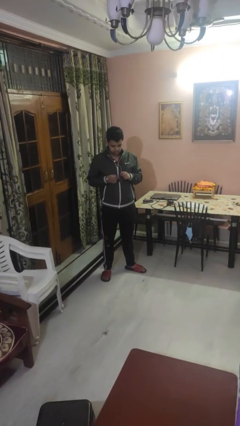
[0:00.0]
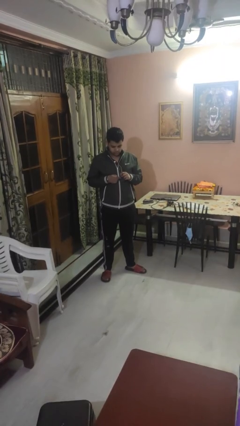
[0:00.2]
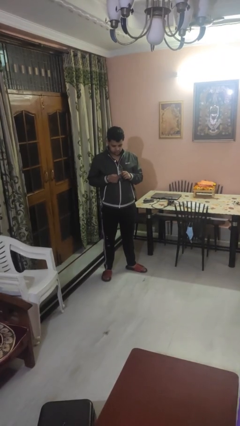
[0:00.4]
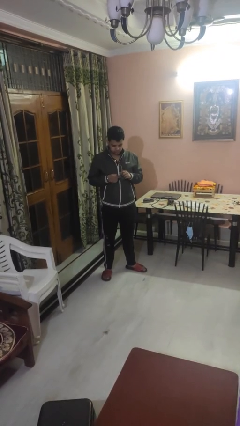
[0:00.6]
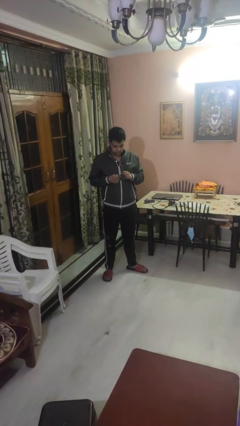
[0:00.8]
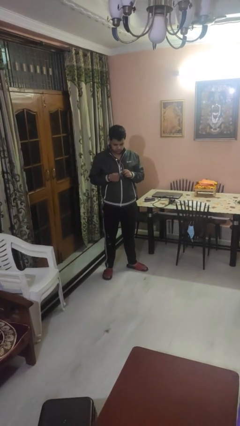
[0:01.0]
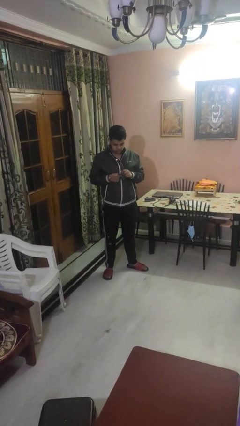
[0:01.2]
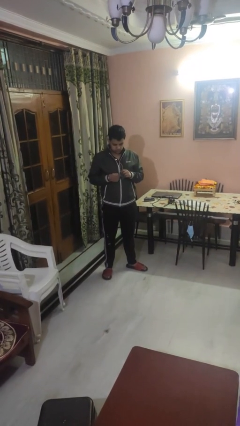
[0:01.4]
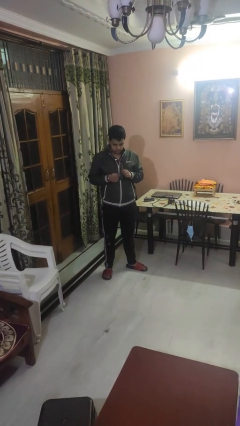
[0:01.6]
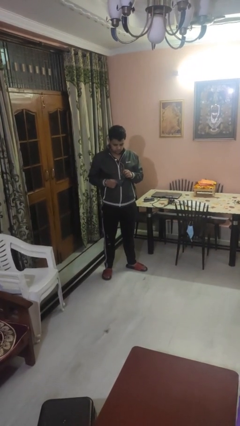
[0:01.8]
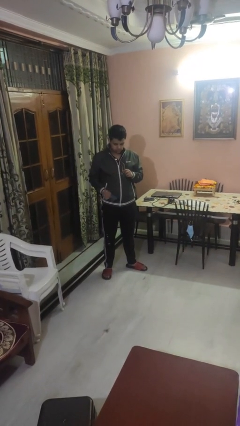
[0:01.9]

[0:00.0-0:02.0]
person cleans eyeglasses

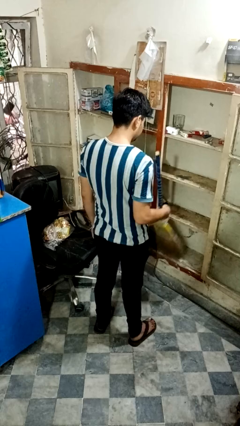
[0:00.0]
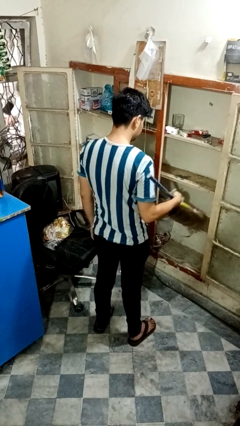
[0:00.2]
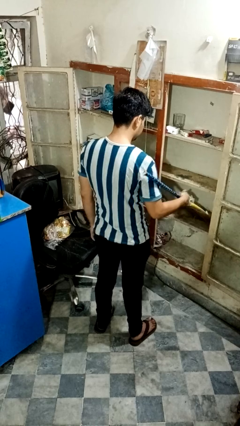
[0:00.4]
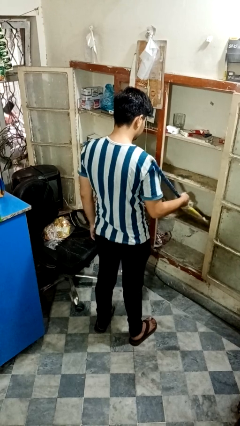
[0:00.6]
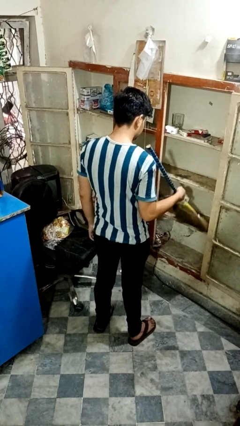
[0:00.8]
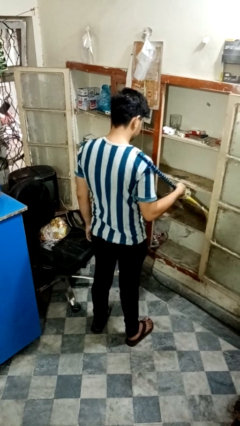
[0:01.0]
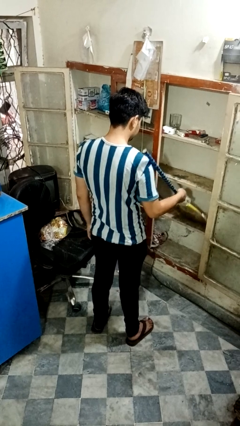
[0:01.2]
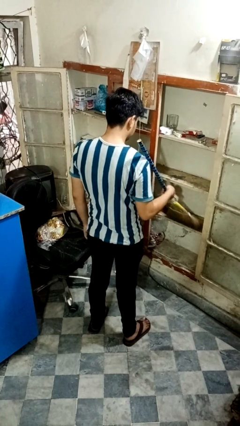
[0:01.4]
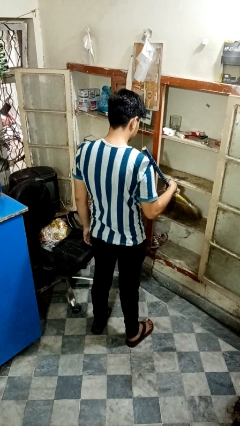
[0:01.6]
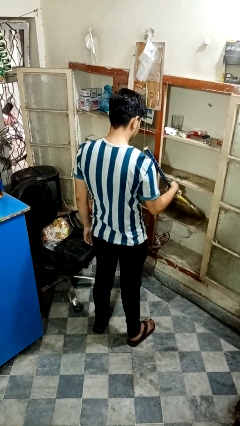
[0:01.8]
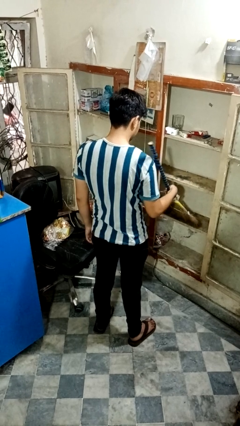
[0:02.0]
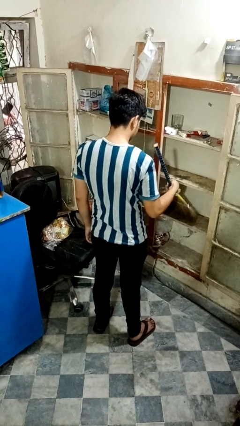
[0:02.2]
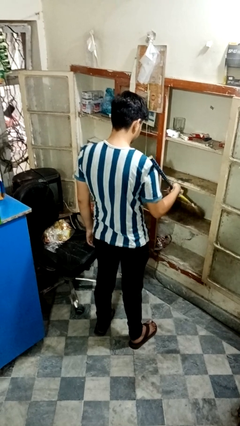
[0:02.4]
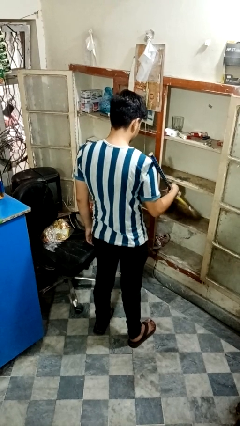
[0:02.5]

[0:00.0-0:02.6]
person dusts furniture

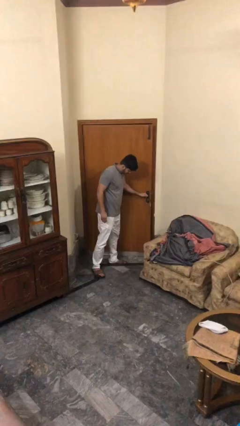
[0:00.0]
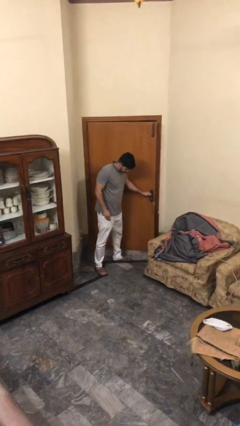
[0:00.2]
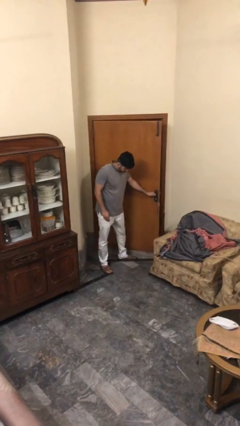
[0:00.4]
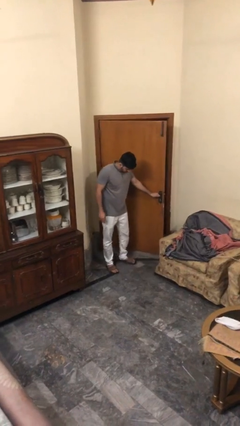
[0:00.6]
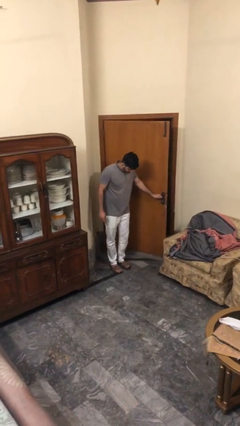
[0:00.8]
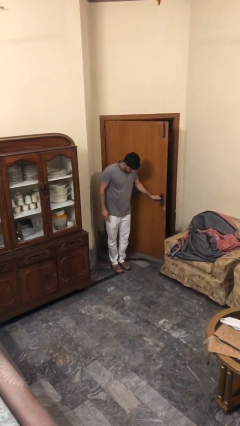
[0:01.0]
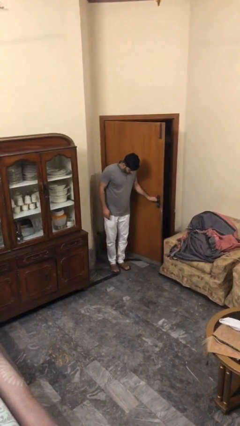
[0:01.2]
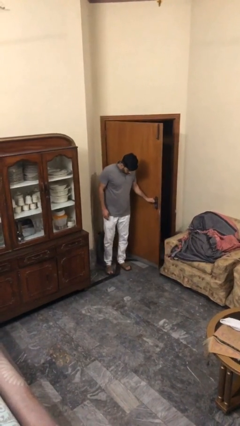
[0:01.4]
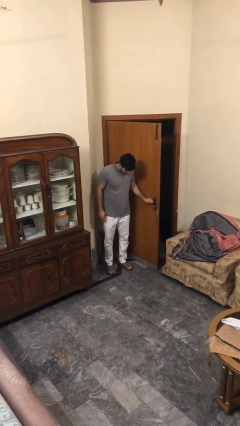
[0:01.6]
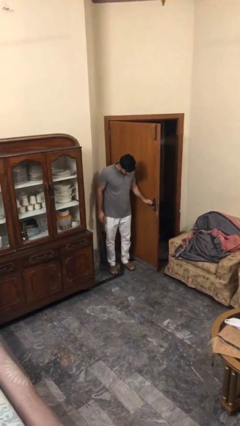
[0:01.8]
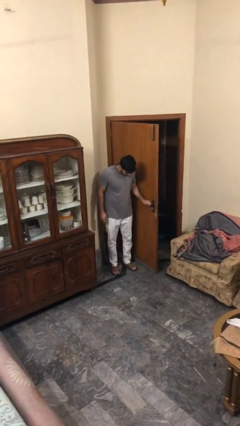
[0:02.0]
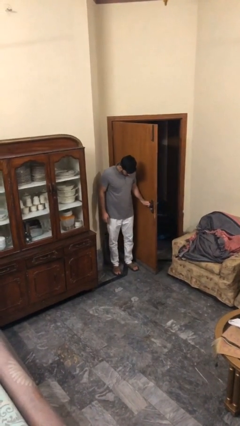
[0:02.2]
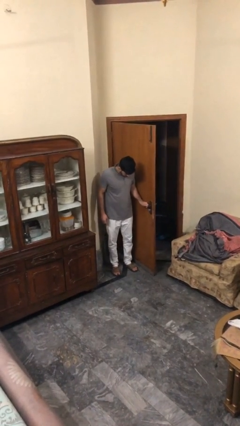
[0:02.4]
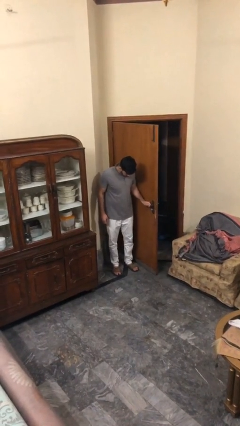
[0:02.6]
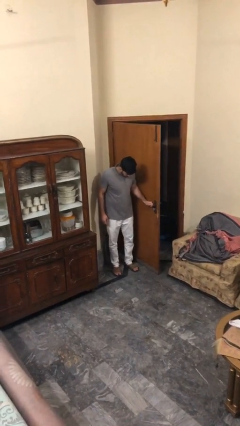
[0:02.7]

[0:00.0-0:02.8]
person opens facility door

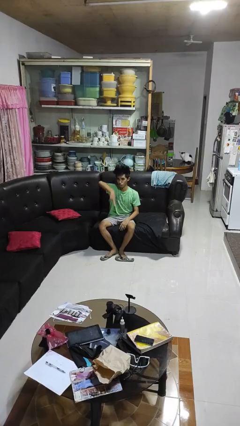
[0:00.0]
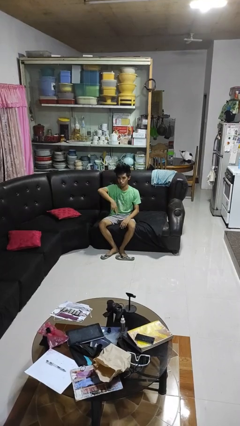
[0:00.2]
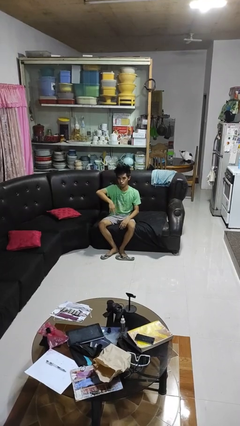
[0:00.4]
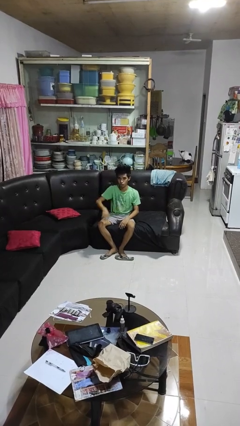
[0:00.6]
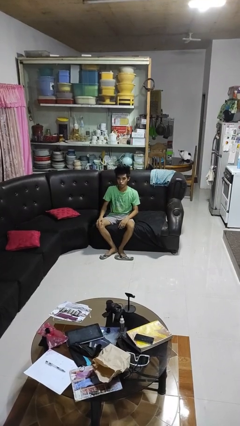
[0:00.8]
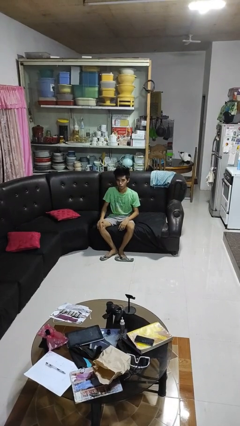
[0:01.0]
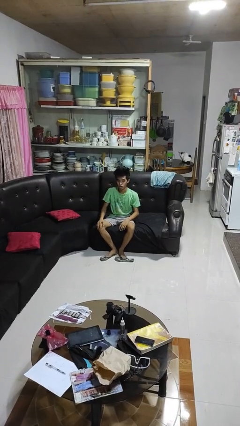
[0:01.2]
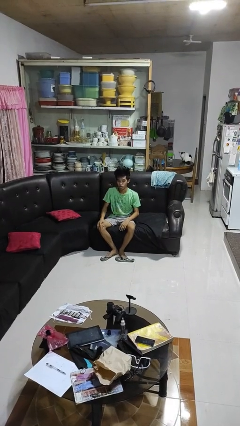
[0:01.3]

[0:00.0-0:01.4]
person gestures swipe down

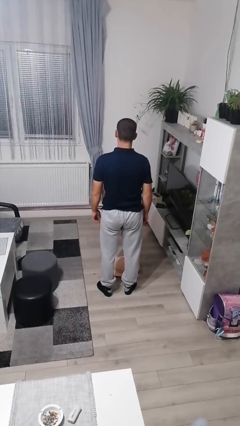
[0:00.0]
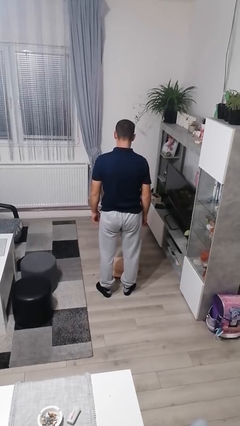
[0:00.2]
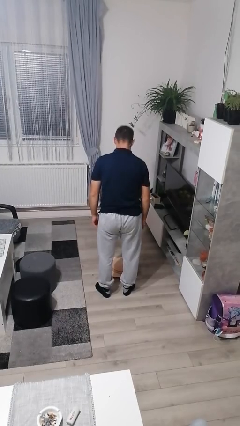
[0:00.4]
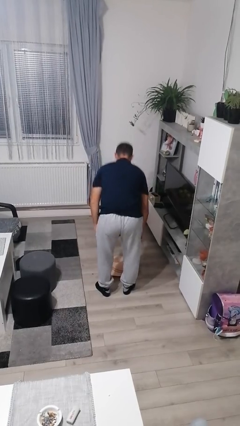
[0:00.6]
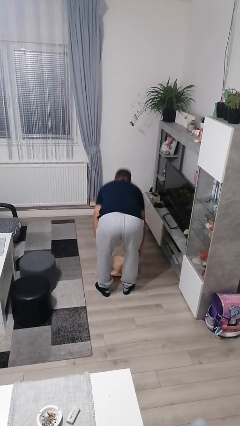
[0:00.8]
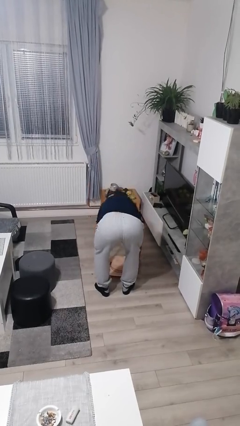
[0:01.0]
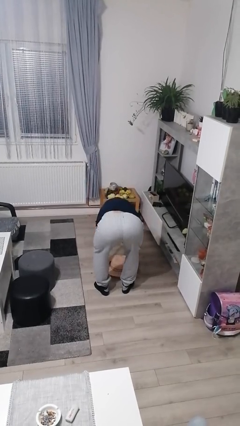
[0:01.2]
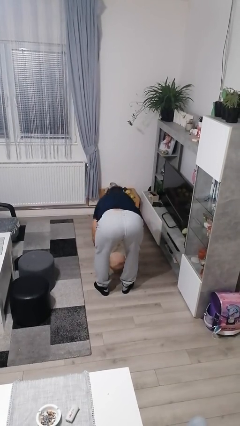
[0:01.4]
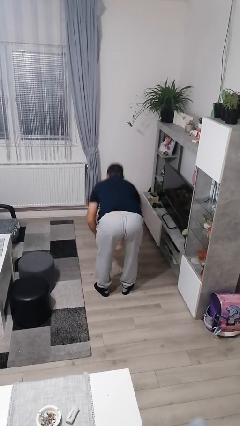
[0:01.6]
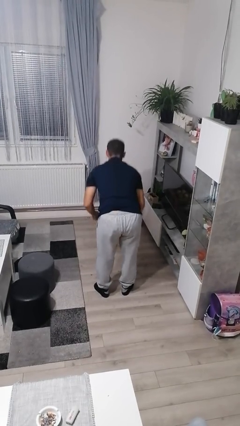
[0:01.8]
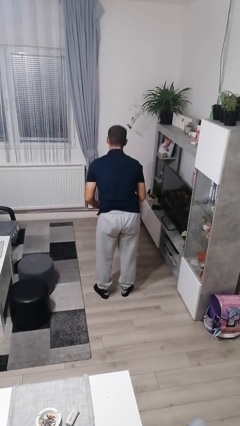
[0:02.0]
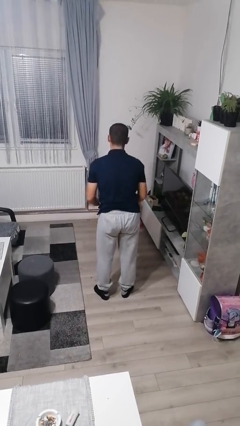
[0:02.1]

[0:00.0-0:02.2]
person picks up object from floor

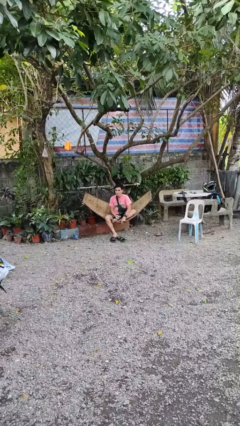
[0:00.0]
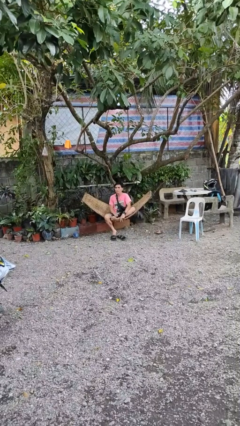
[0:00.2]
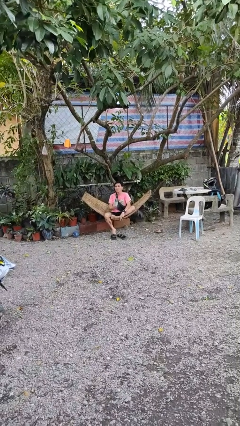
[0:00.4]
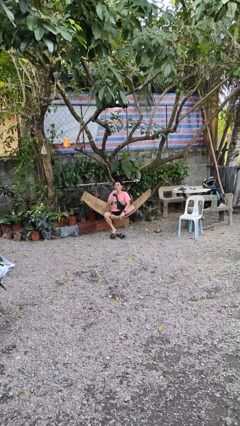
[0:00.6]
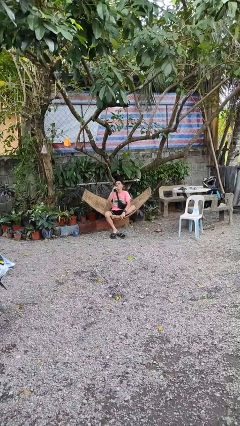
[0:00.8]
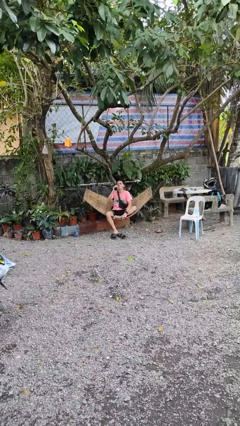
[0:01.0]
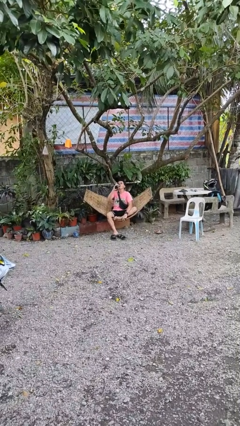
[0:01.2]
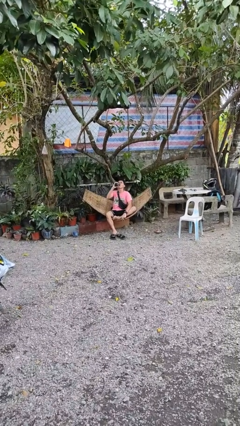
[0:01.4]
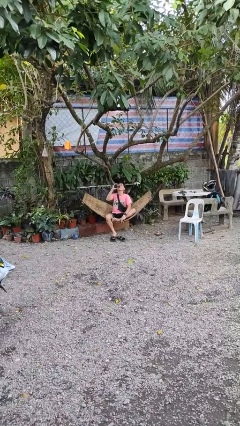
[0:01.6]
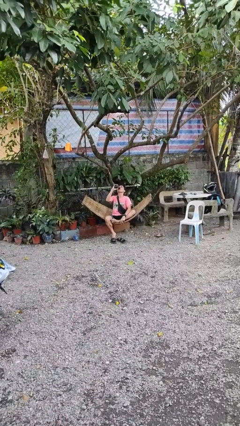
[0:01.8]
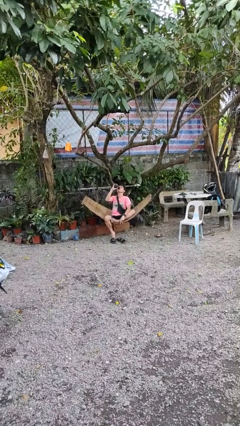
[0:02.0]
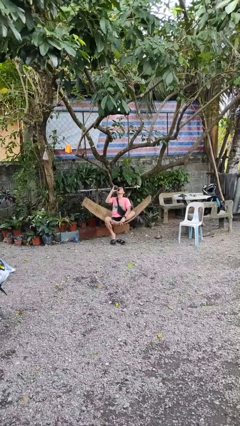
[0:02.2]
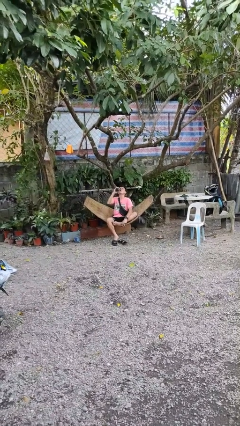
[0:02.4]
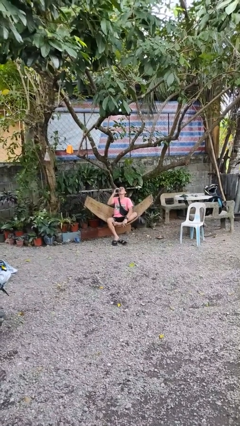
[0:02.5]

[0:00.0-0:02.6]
person drinks from bottle

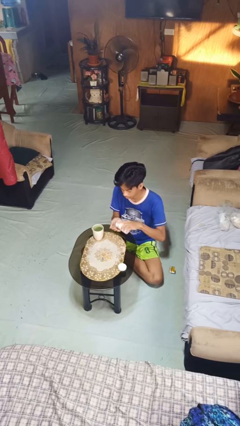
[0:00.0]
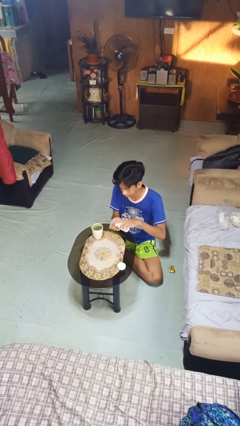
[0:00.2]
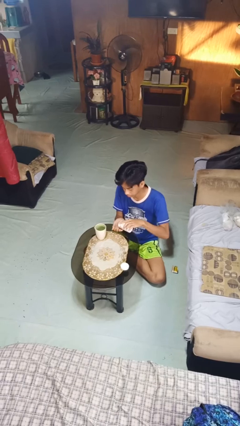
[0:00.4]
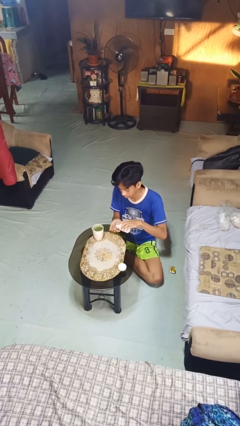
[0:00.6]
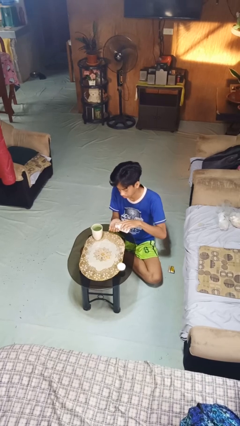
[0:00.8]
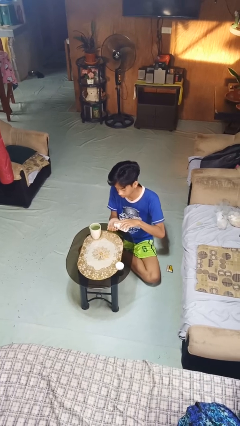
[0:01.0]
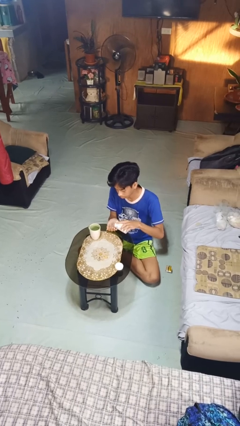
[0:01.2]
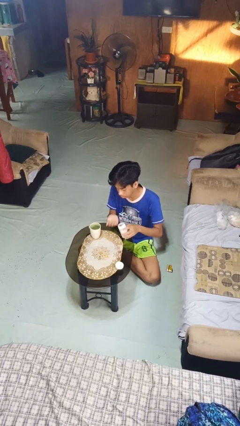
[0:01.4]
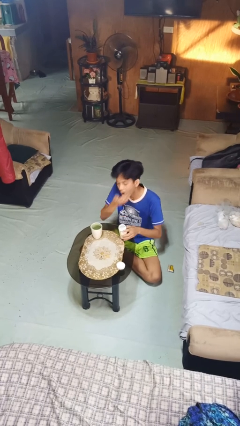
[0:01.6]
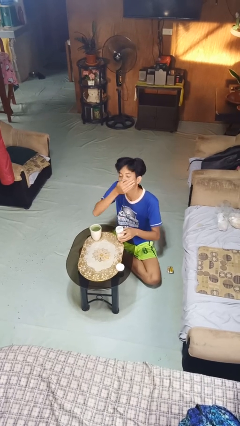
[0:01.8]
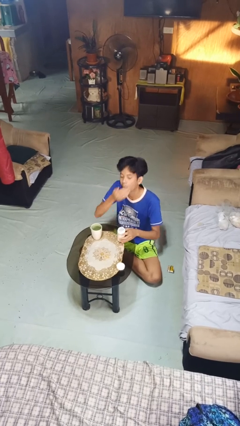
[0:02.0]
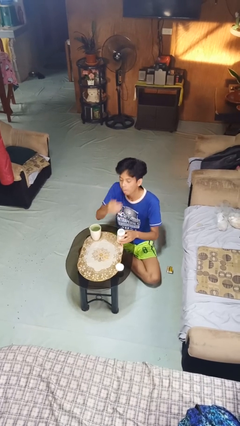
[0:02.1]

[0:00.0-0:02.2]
person takes medicine pills

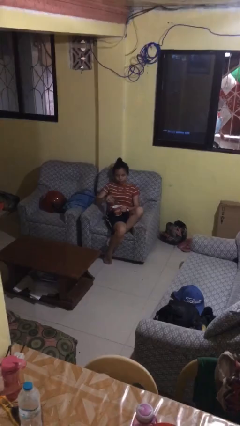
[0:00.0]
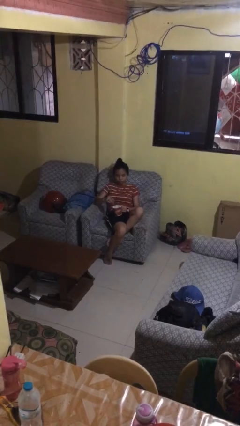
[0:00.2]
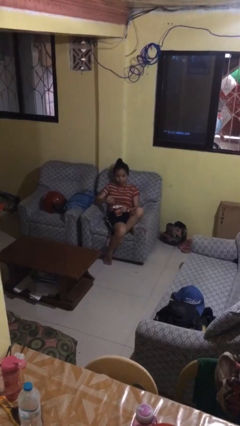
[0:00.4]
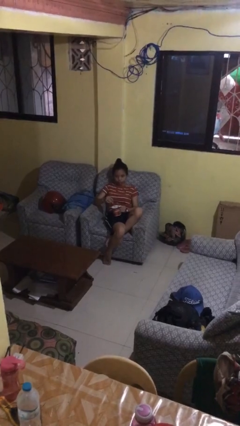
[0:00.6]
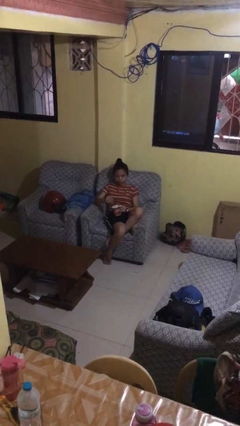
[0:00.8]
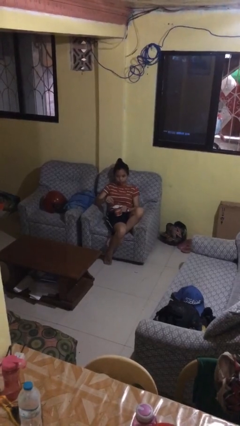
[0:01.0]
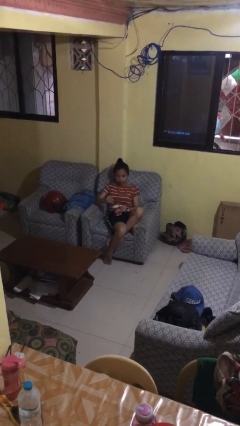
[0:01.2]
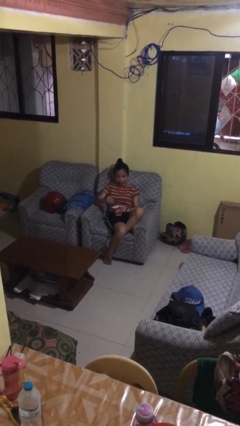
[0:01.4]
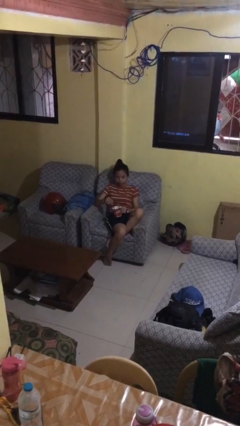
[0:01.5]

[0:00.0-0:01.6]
person stirs mug
